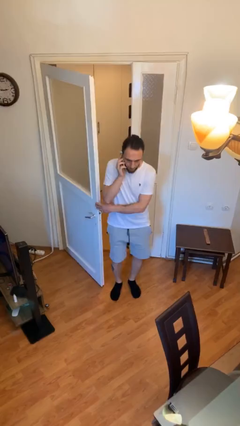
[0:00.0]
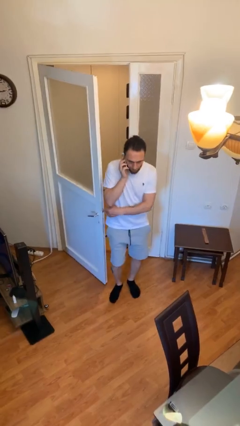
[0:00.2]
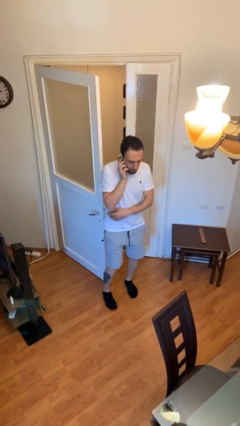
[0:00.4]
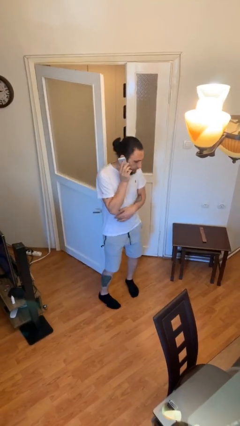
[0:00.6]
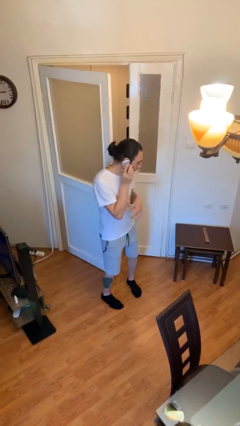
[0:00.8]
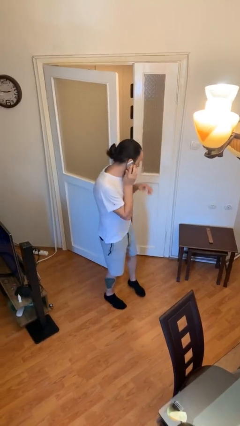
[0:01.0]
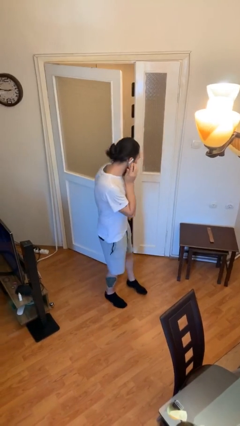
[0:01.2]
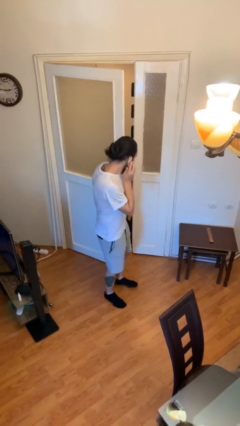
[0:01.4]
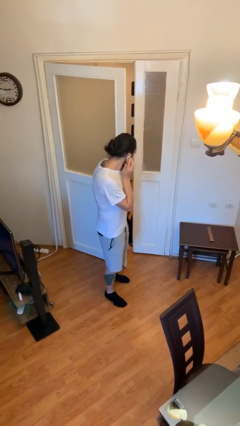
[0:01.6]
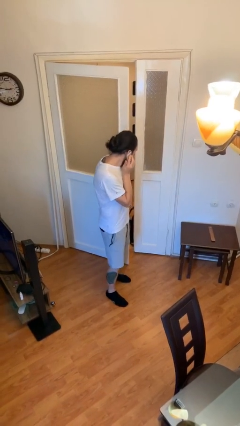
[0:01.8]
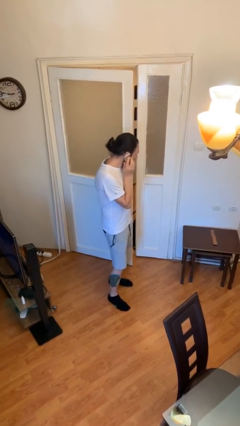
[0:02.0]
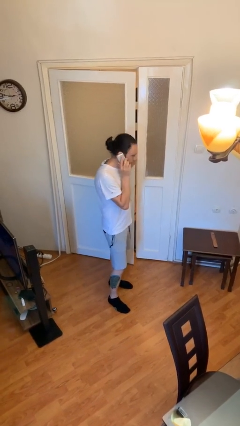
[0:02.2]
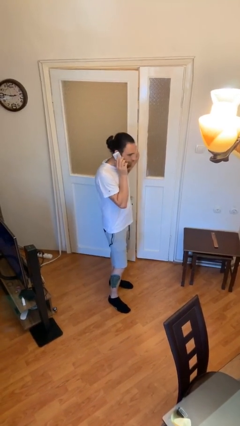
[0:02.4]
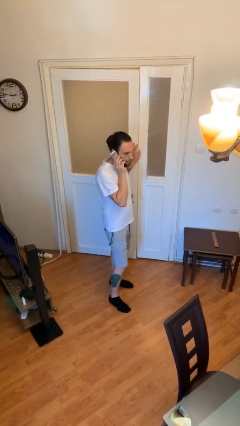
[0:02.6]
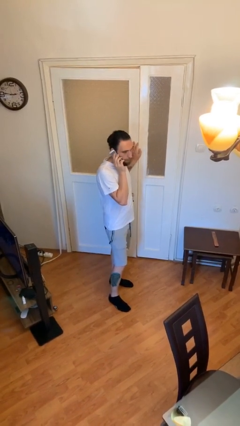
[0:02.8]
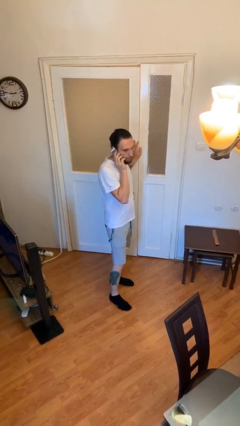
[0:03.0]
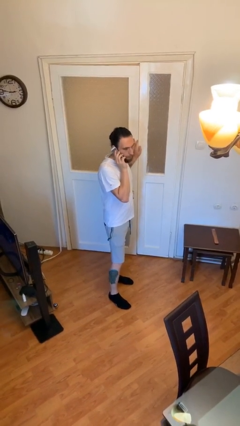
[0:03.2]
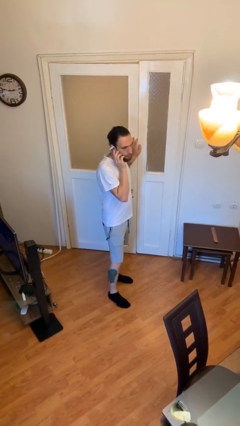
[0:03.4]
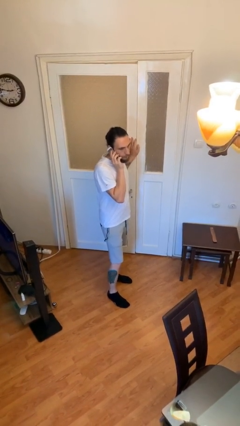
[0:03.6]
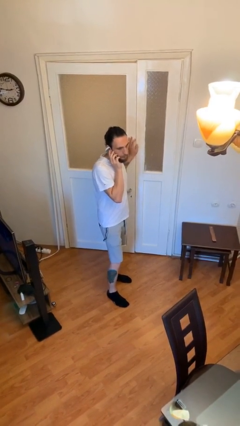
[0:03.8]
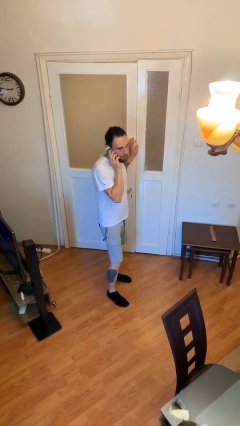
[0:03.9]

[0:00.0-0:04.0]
person closes facility door

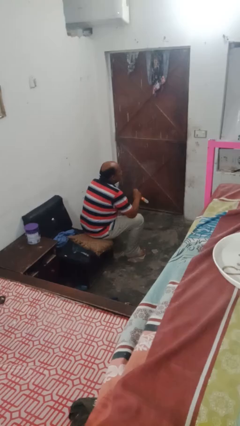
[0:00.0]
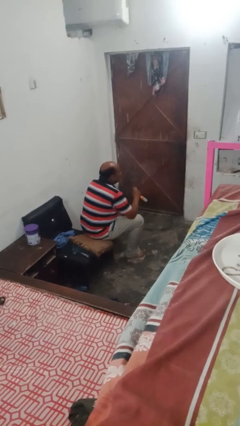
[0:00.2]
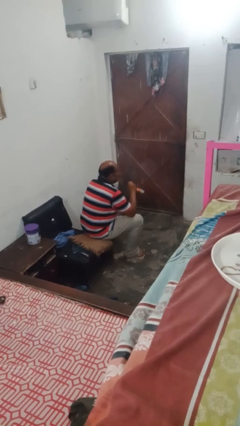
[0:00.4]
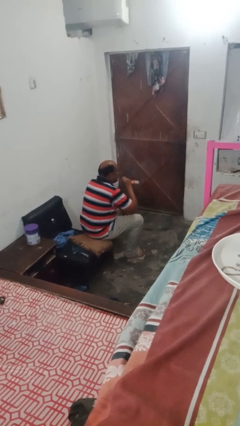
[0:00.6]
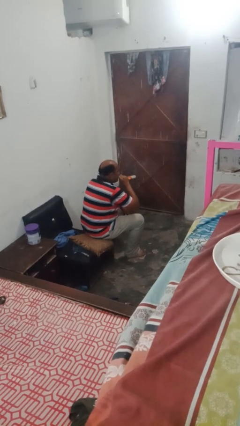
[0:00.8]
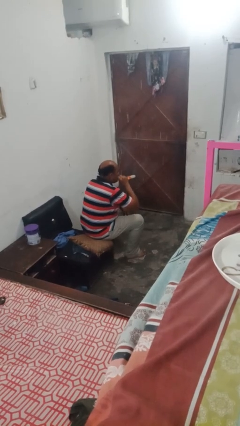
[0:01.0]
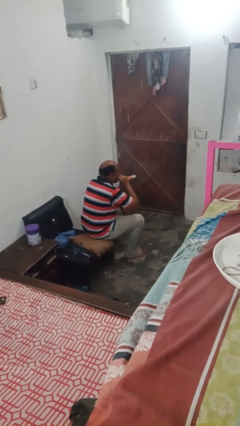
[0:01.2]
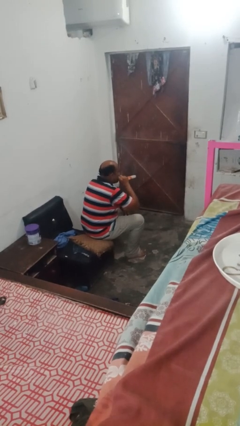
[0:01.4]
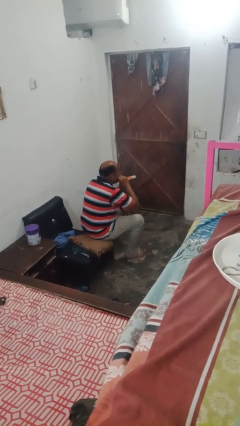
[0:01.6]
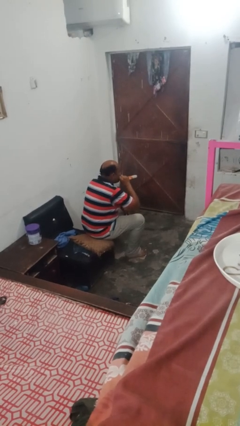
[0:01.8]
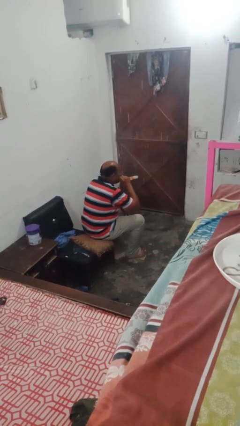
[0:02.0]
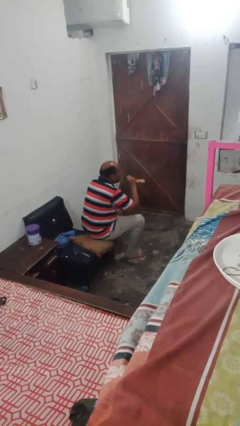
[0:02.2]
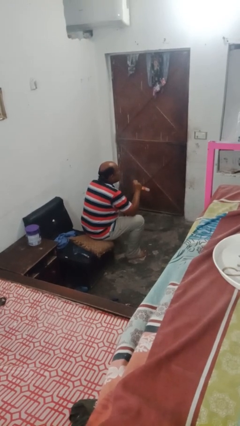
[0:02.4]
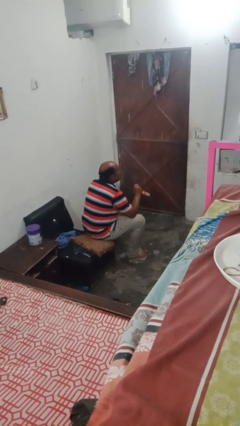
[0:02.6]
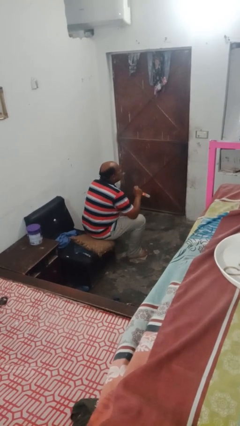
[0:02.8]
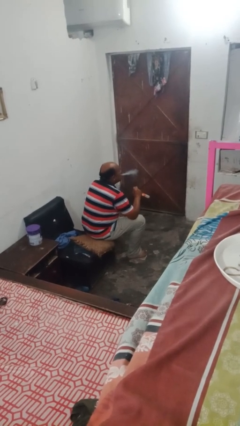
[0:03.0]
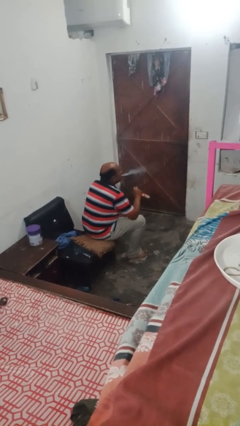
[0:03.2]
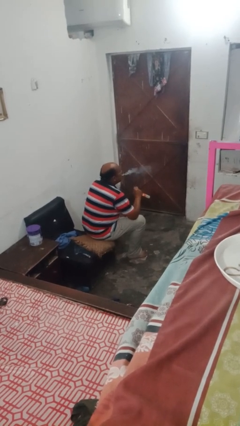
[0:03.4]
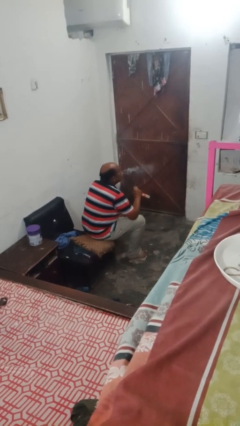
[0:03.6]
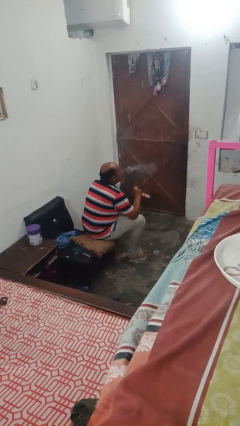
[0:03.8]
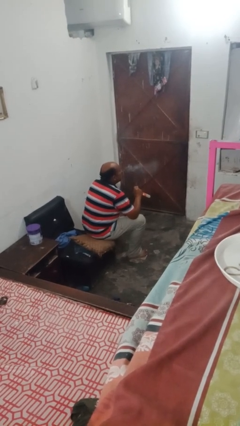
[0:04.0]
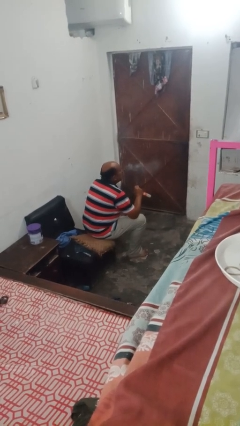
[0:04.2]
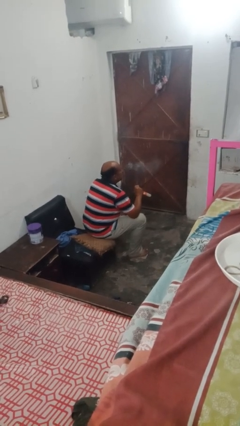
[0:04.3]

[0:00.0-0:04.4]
person vapes

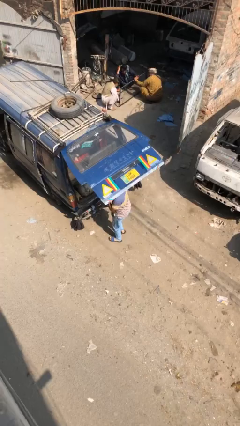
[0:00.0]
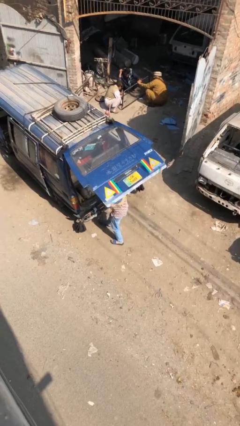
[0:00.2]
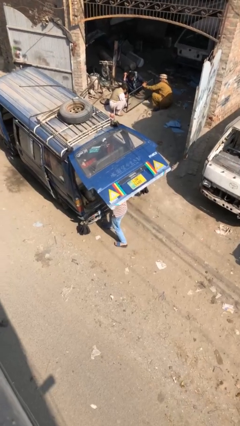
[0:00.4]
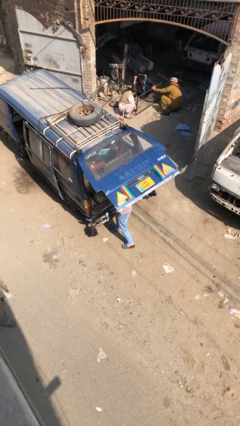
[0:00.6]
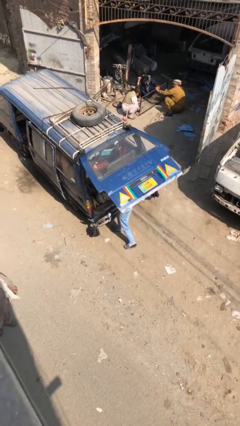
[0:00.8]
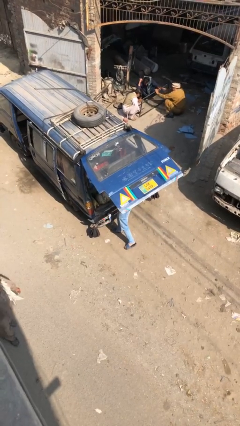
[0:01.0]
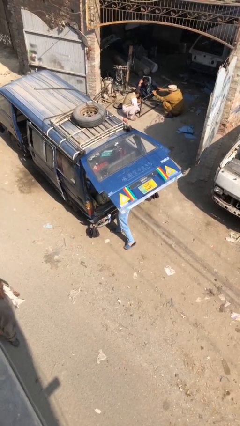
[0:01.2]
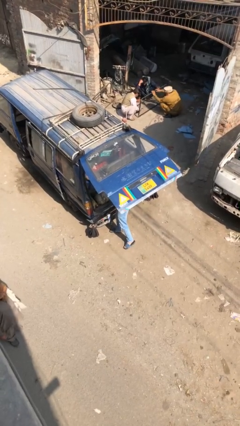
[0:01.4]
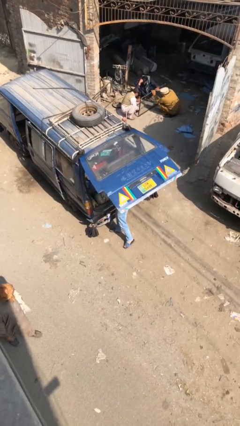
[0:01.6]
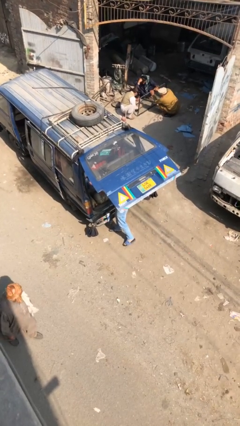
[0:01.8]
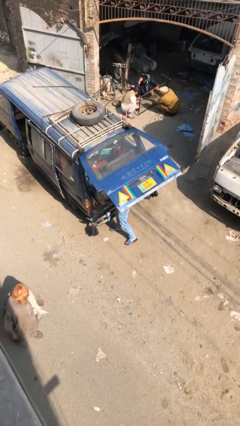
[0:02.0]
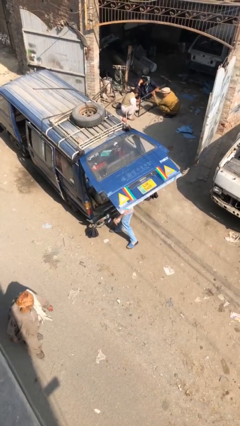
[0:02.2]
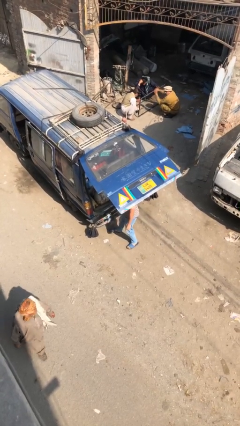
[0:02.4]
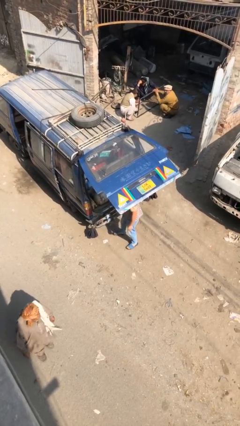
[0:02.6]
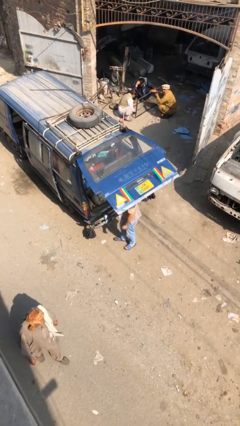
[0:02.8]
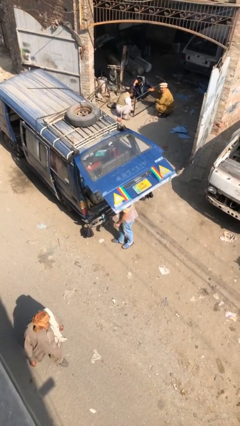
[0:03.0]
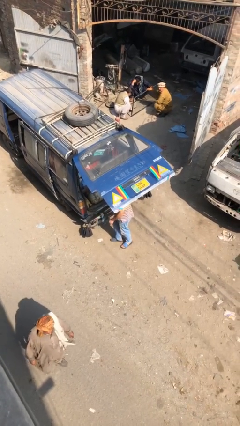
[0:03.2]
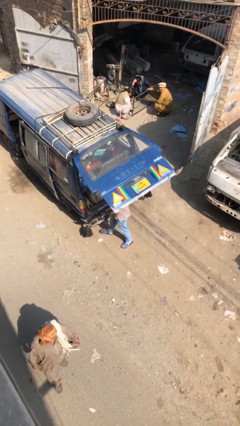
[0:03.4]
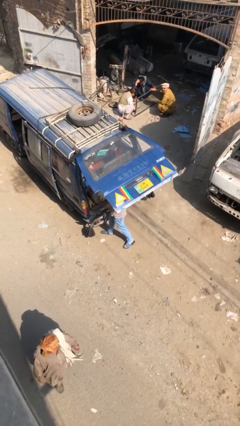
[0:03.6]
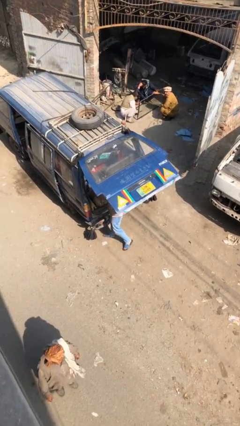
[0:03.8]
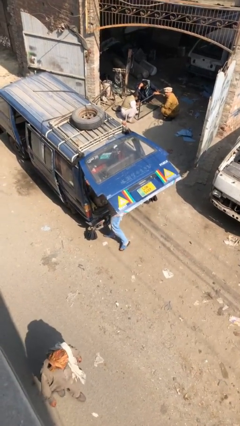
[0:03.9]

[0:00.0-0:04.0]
person loads car

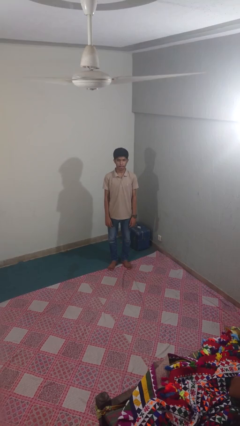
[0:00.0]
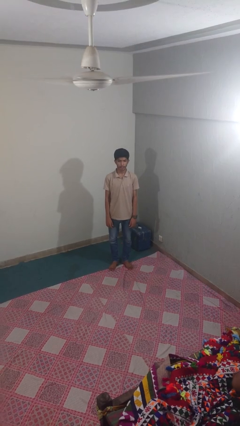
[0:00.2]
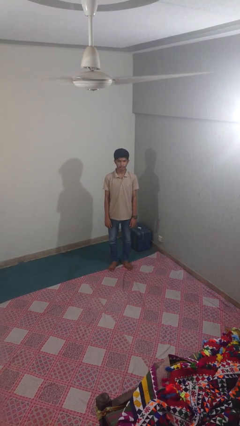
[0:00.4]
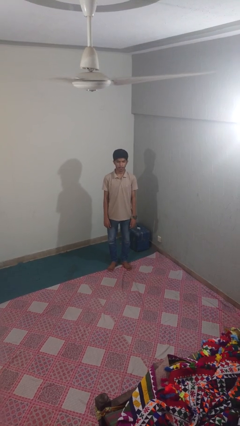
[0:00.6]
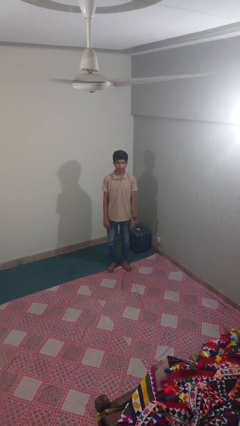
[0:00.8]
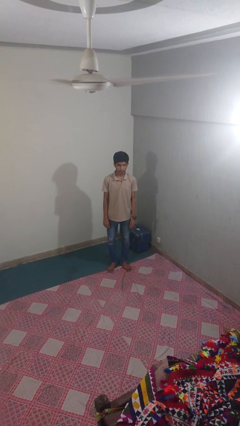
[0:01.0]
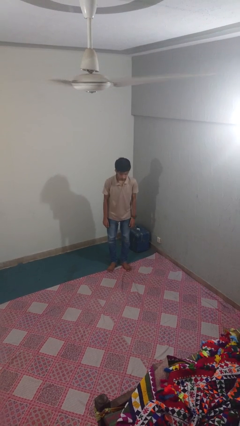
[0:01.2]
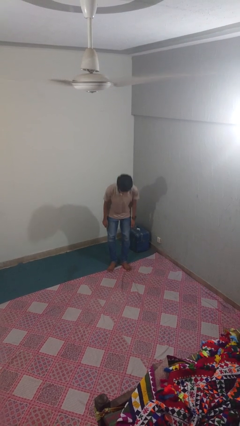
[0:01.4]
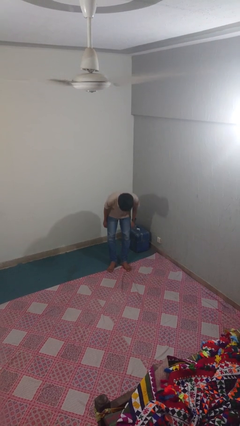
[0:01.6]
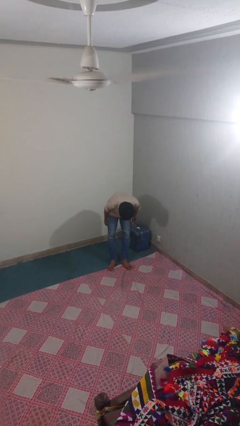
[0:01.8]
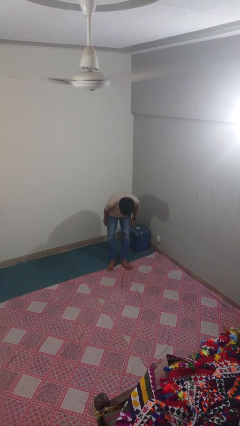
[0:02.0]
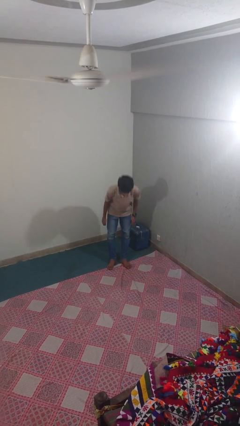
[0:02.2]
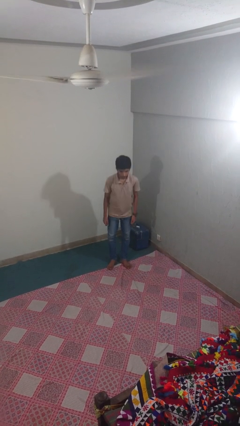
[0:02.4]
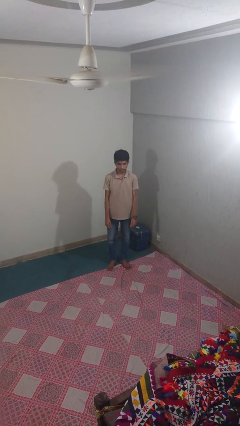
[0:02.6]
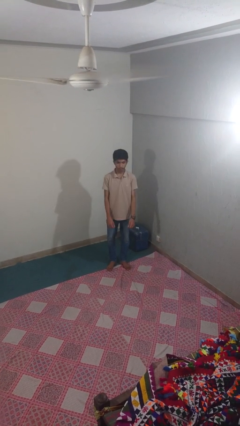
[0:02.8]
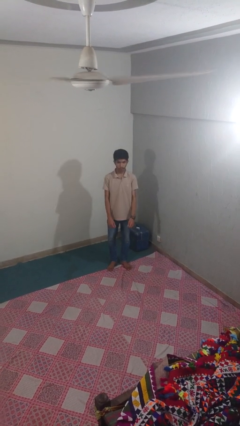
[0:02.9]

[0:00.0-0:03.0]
person bows

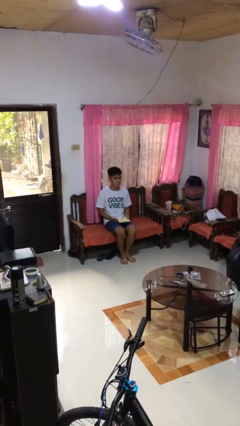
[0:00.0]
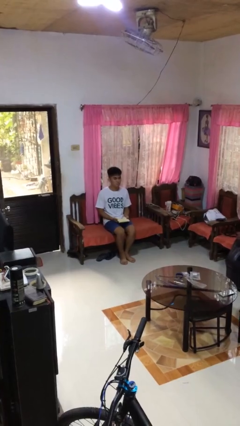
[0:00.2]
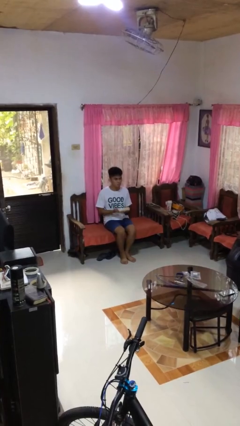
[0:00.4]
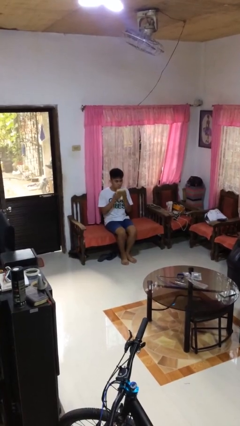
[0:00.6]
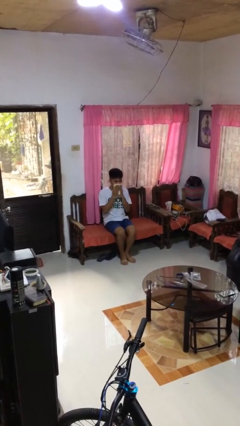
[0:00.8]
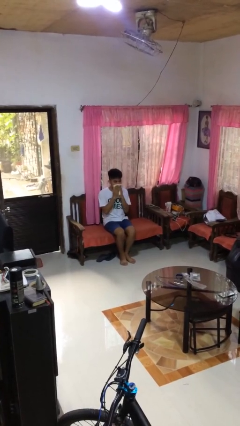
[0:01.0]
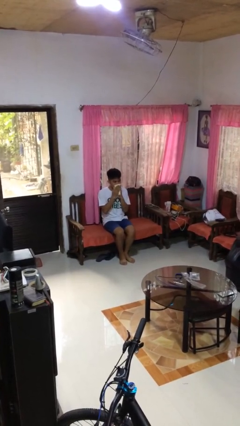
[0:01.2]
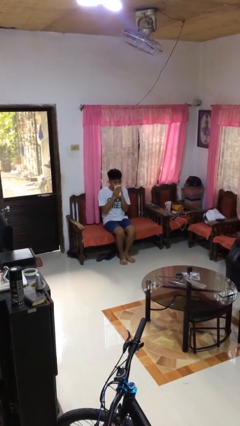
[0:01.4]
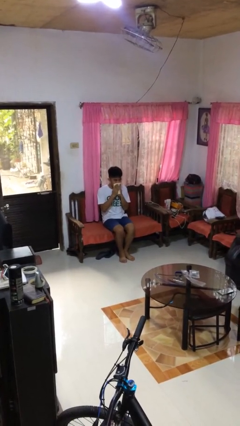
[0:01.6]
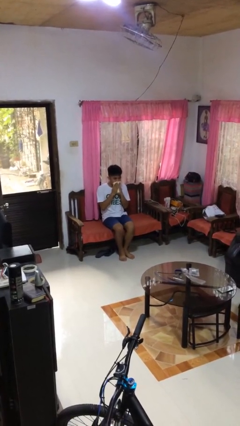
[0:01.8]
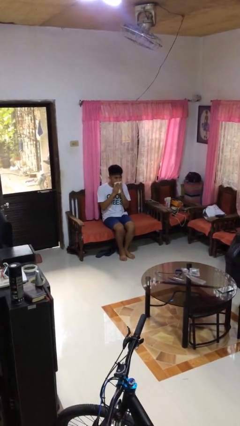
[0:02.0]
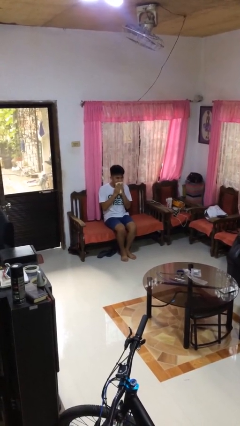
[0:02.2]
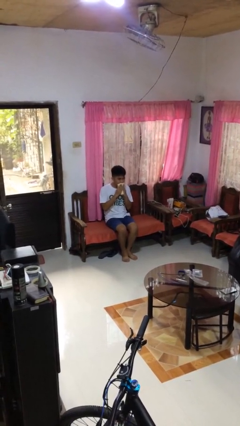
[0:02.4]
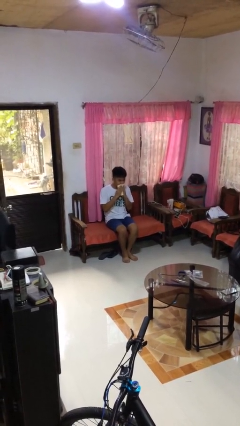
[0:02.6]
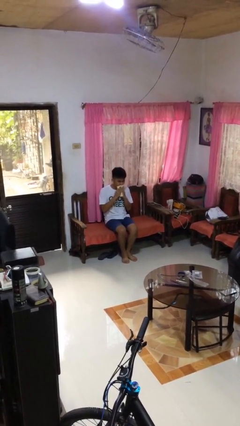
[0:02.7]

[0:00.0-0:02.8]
person wipes mouth with napkin
